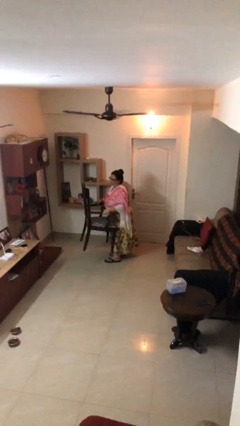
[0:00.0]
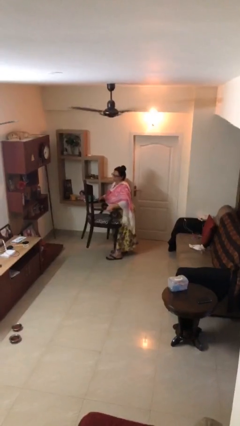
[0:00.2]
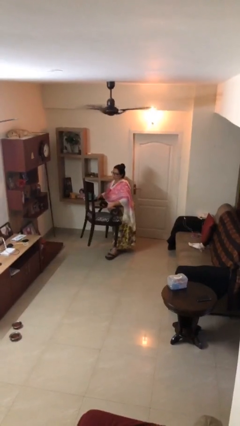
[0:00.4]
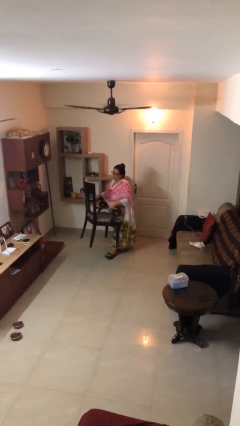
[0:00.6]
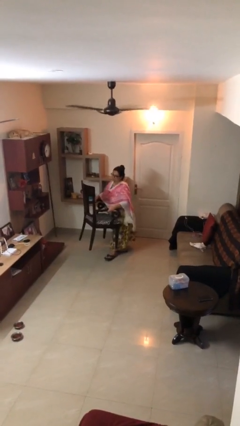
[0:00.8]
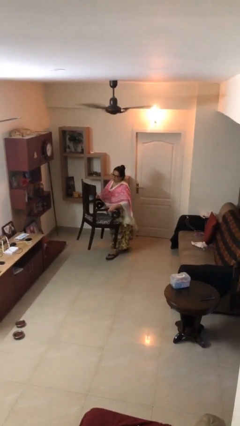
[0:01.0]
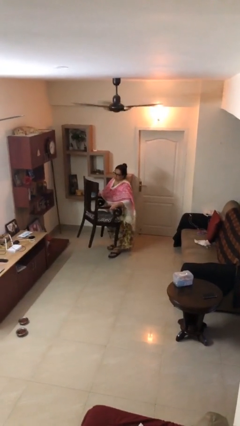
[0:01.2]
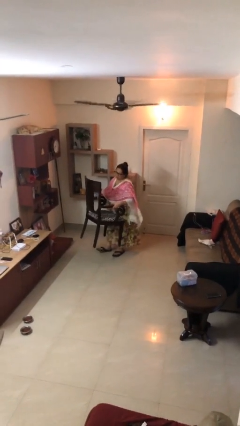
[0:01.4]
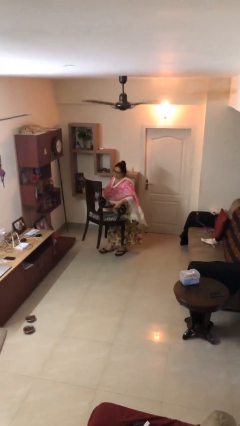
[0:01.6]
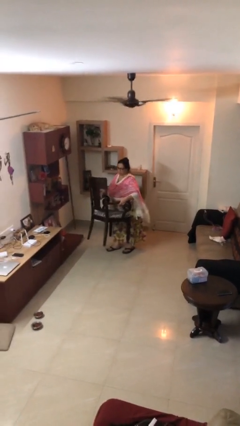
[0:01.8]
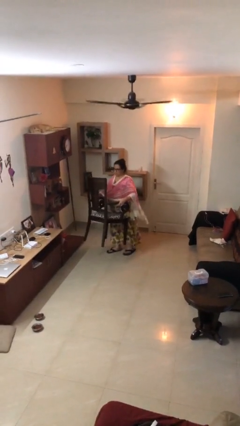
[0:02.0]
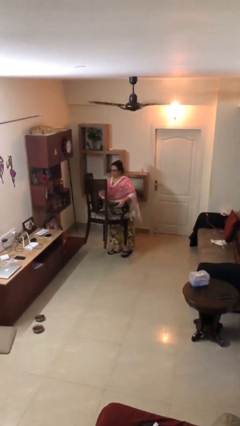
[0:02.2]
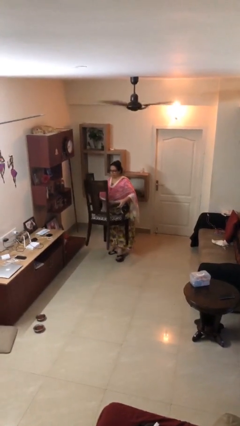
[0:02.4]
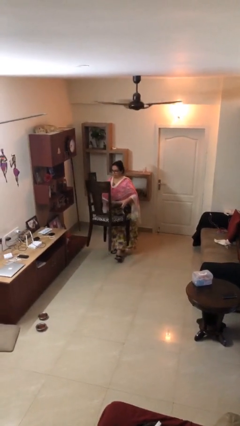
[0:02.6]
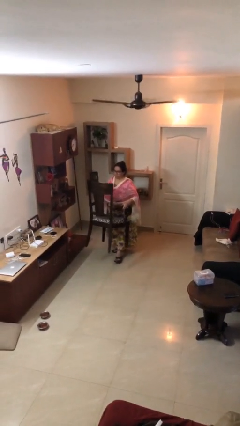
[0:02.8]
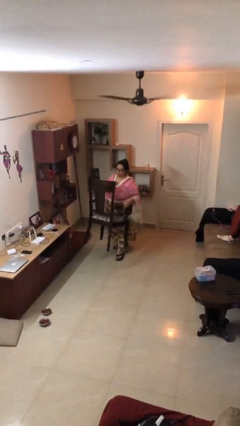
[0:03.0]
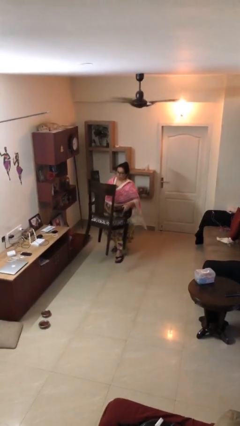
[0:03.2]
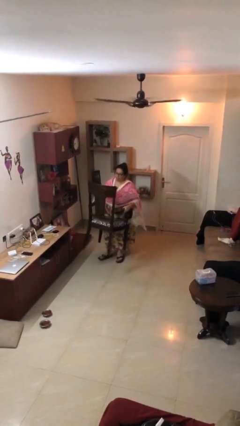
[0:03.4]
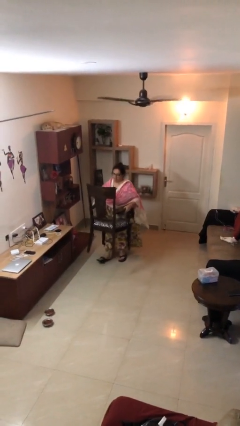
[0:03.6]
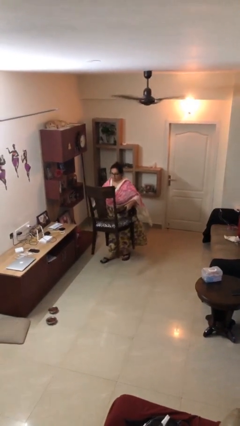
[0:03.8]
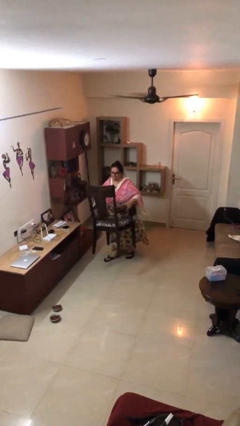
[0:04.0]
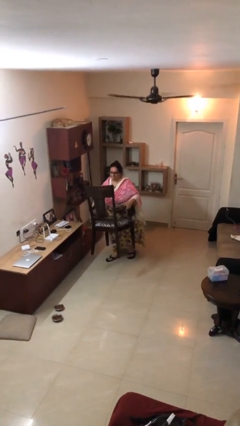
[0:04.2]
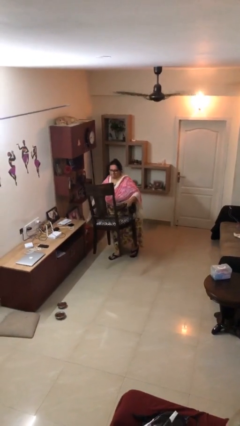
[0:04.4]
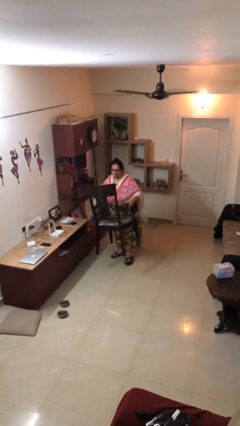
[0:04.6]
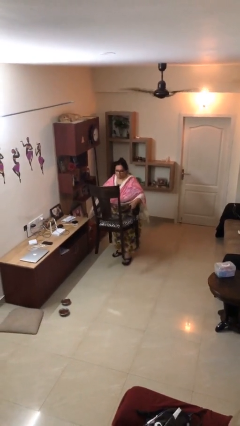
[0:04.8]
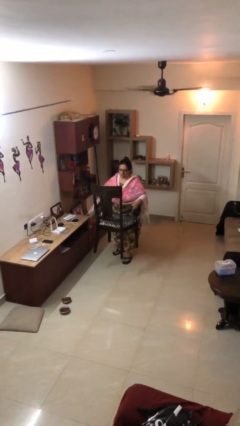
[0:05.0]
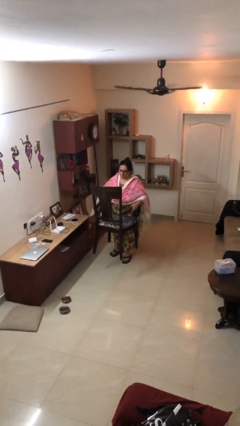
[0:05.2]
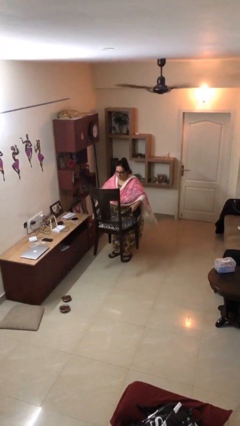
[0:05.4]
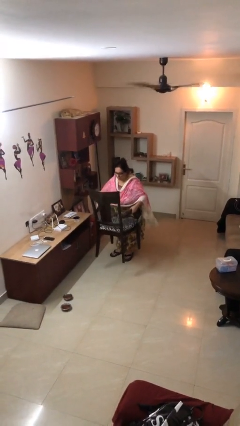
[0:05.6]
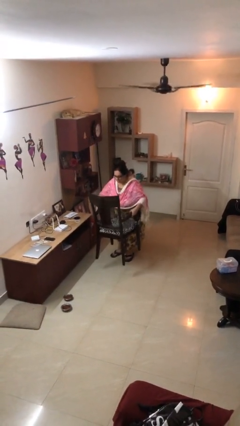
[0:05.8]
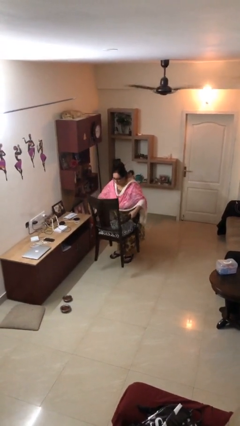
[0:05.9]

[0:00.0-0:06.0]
person carries heavy object

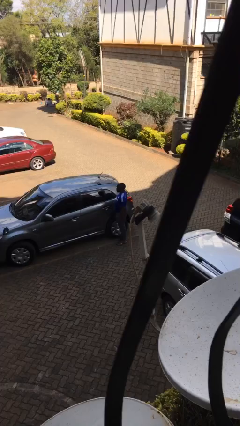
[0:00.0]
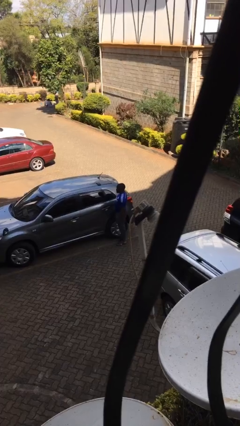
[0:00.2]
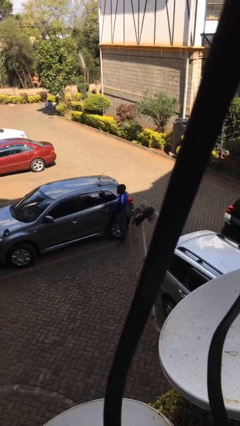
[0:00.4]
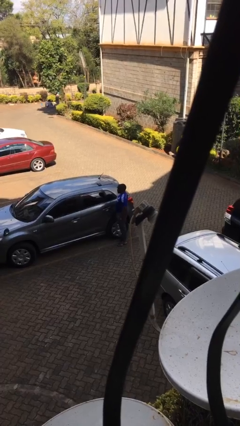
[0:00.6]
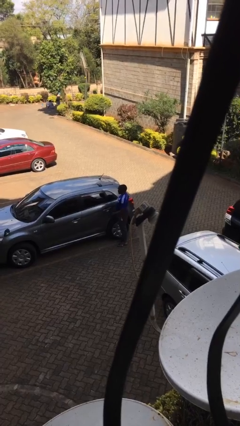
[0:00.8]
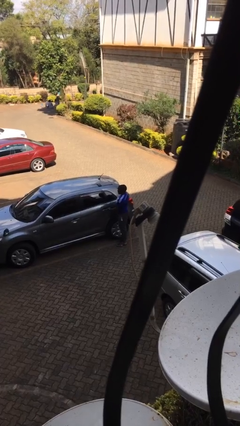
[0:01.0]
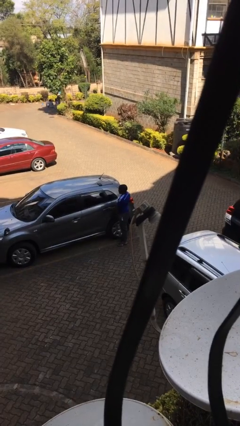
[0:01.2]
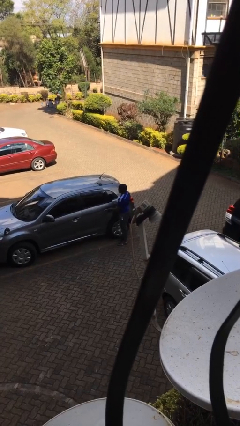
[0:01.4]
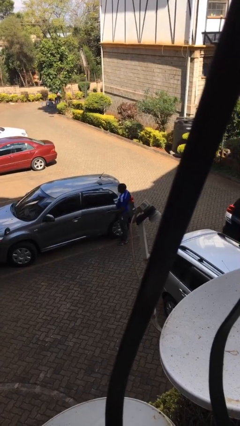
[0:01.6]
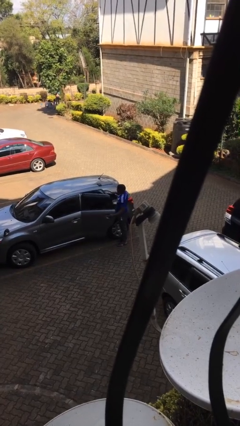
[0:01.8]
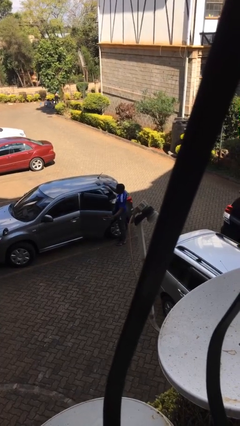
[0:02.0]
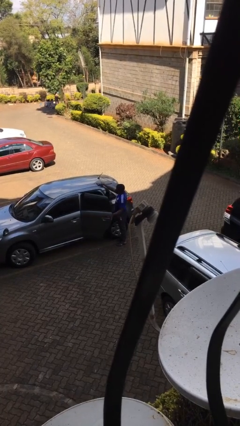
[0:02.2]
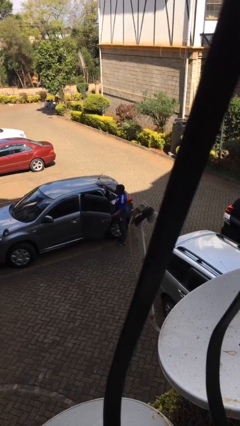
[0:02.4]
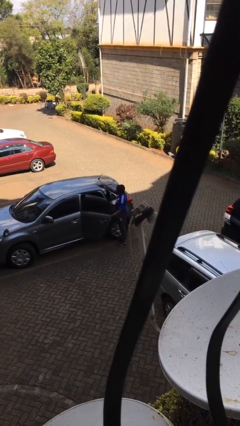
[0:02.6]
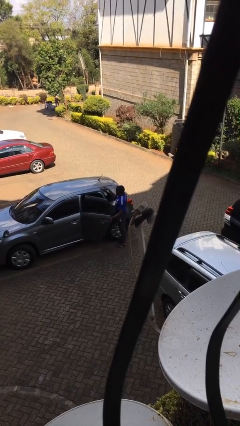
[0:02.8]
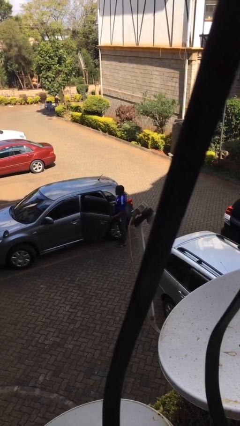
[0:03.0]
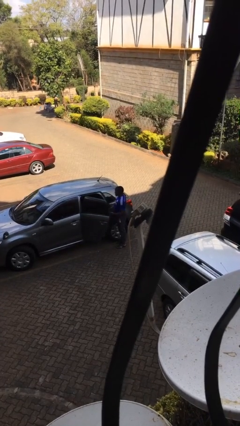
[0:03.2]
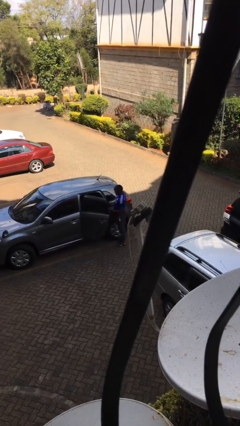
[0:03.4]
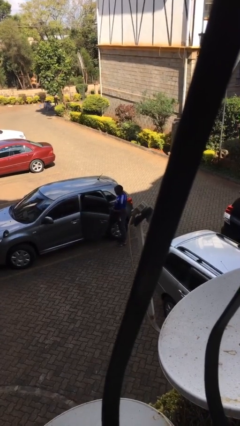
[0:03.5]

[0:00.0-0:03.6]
person opens car door

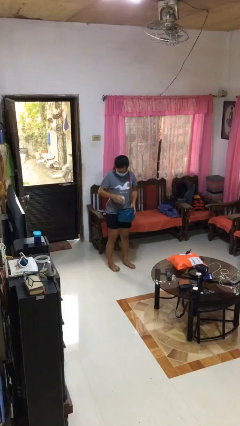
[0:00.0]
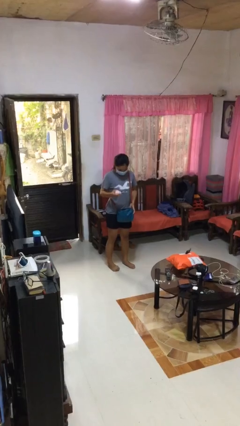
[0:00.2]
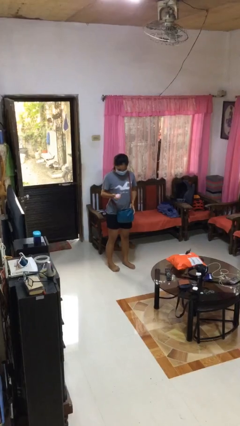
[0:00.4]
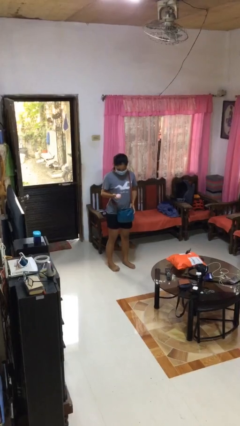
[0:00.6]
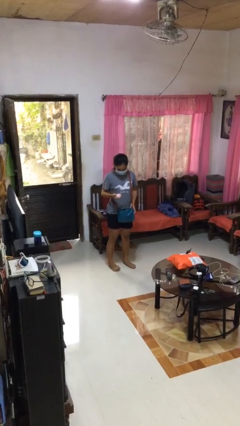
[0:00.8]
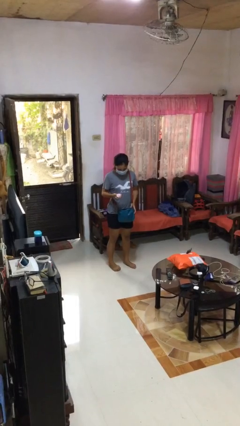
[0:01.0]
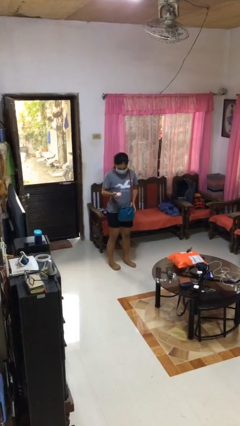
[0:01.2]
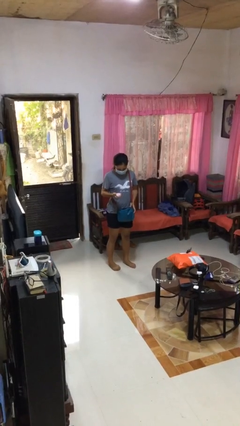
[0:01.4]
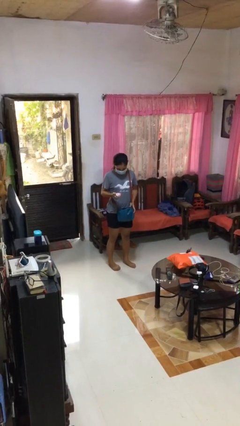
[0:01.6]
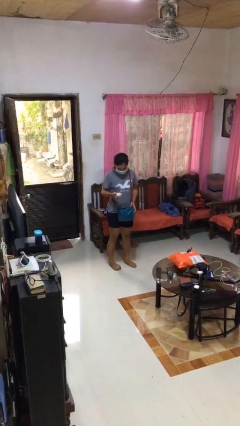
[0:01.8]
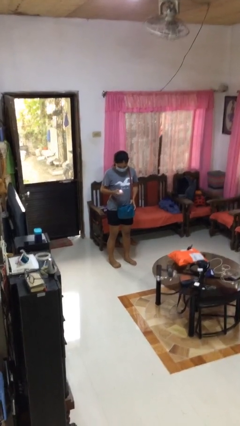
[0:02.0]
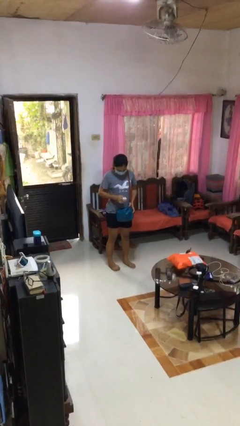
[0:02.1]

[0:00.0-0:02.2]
person takes object from purse

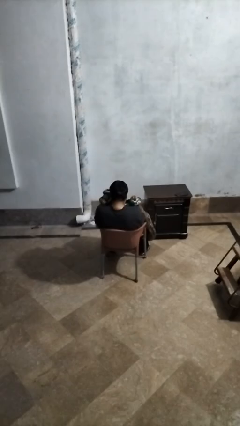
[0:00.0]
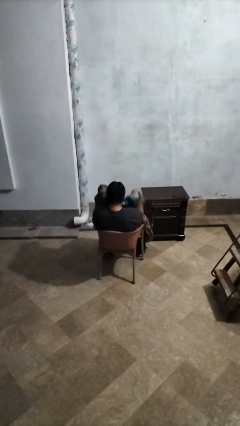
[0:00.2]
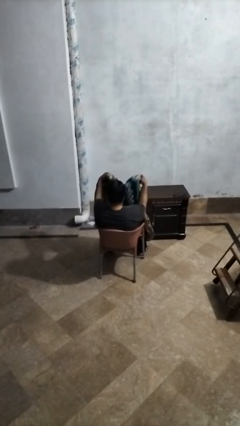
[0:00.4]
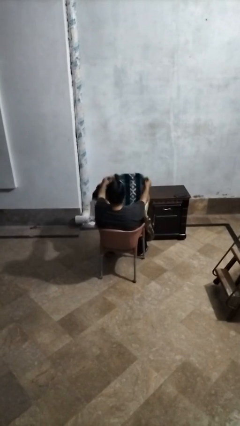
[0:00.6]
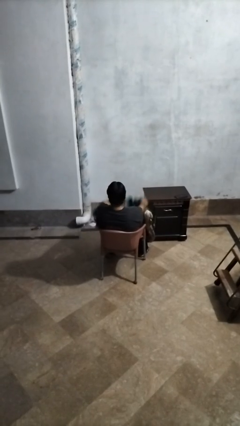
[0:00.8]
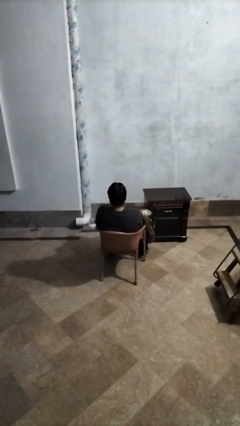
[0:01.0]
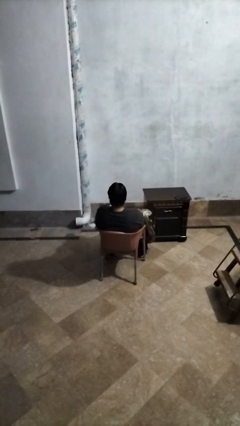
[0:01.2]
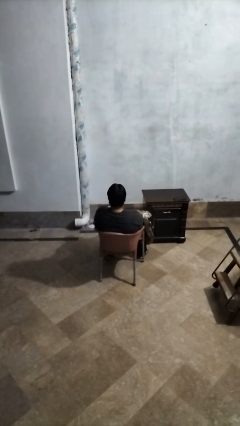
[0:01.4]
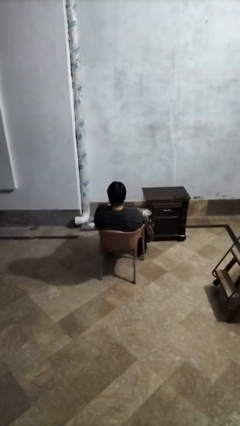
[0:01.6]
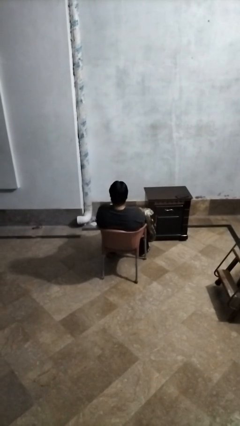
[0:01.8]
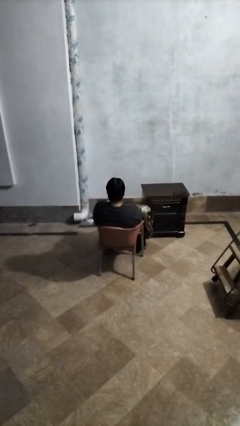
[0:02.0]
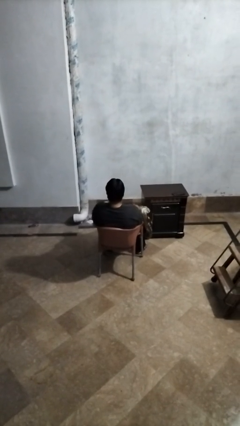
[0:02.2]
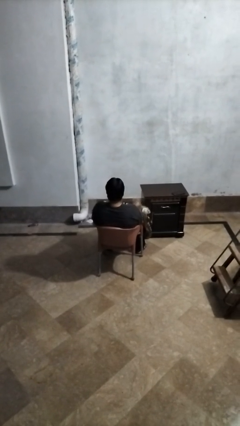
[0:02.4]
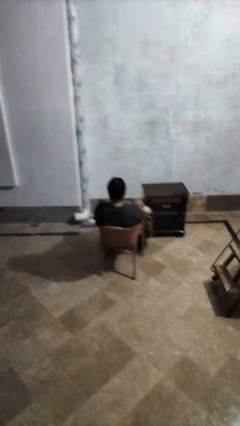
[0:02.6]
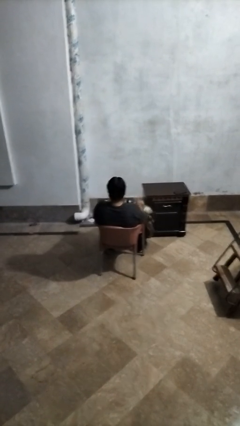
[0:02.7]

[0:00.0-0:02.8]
person uncovers with blanket

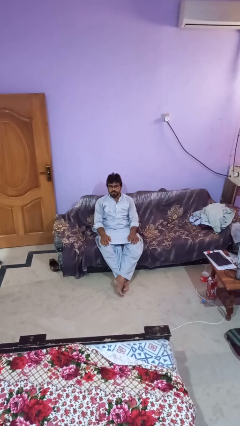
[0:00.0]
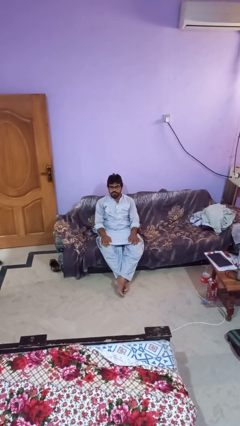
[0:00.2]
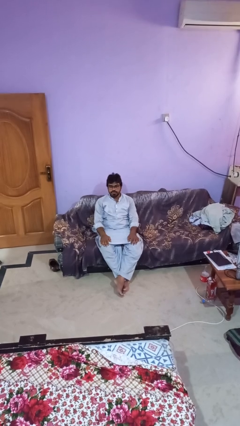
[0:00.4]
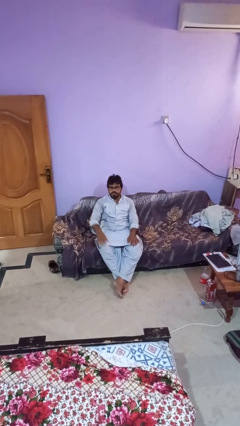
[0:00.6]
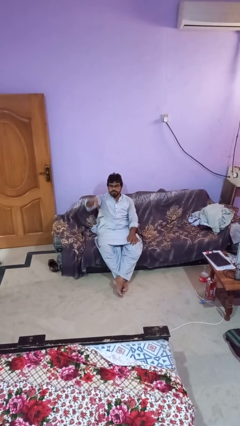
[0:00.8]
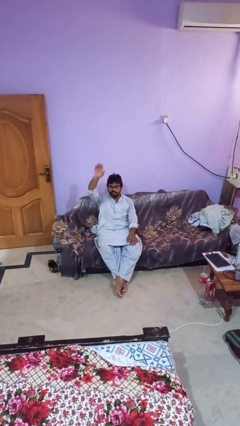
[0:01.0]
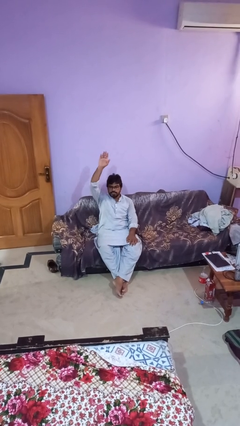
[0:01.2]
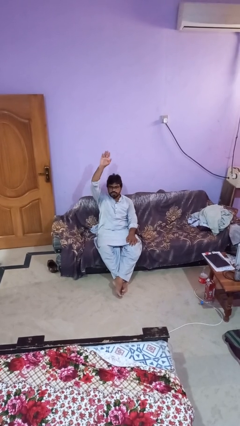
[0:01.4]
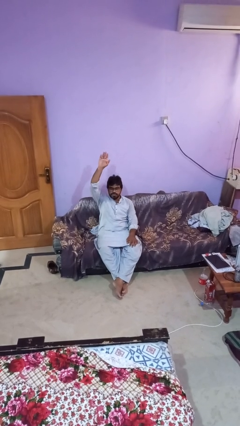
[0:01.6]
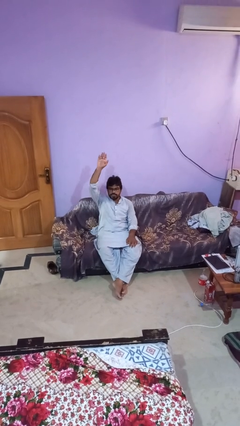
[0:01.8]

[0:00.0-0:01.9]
person gestures raise hand

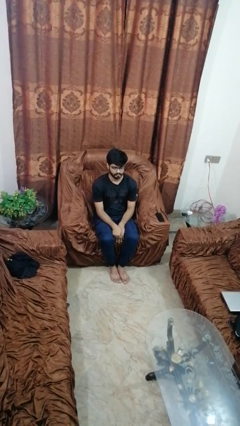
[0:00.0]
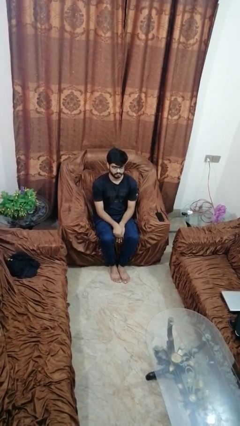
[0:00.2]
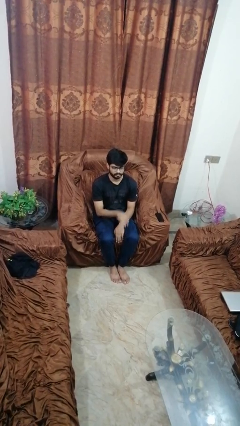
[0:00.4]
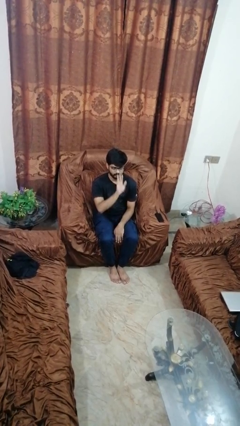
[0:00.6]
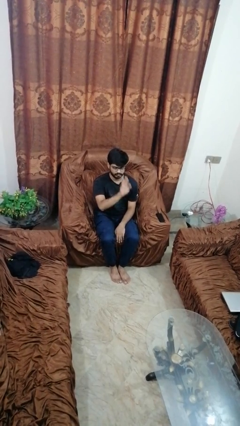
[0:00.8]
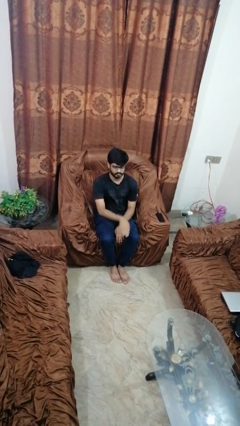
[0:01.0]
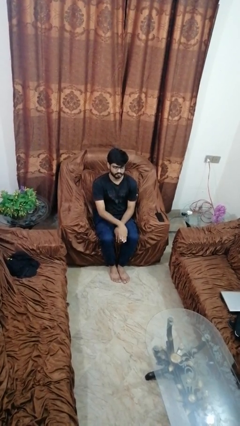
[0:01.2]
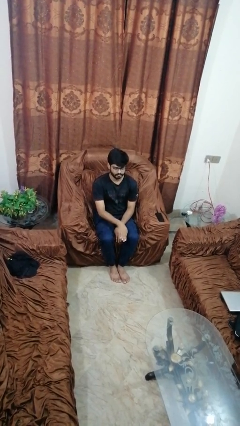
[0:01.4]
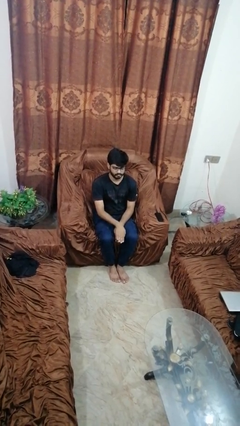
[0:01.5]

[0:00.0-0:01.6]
person gestures swipe down
